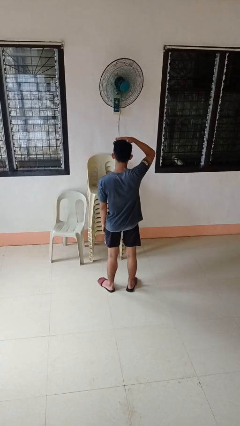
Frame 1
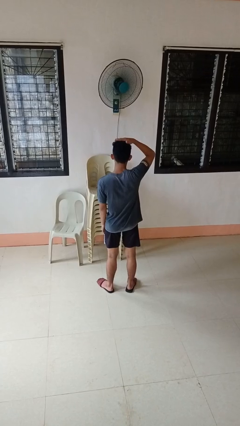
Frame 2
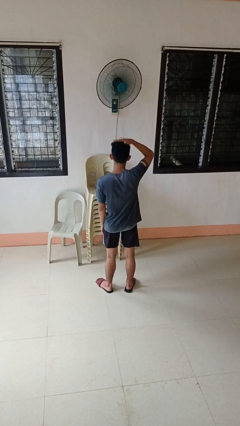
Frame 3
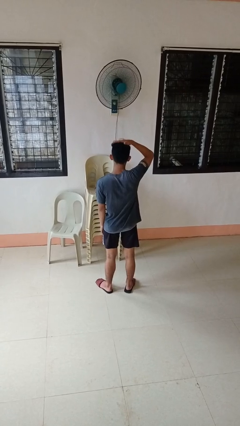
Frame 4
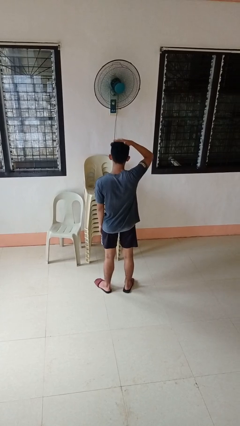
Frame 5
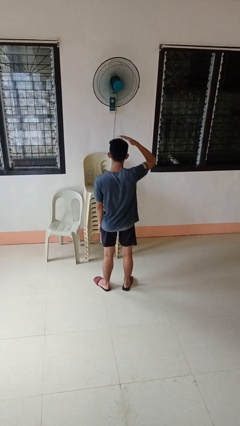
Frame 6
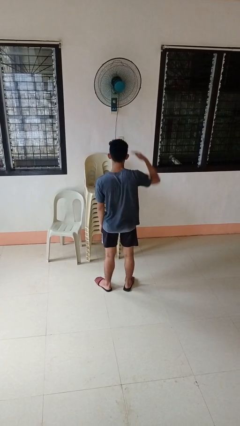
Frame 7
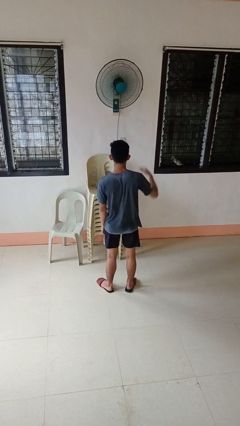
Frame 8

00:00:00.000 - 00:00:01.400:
person pats head

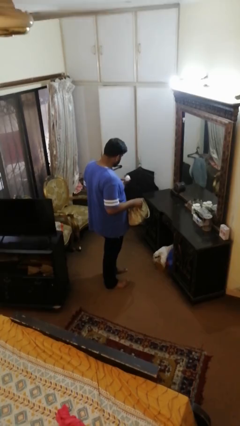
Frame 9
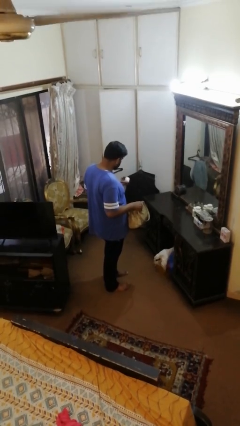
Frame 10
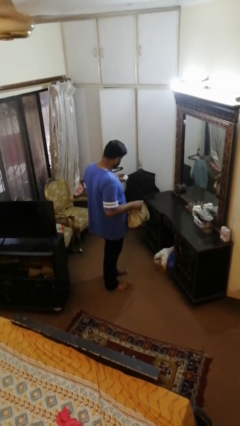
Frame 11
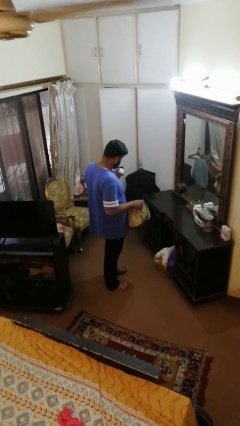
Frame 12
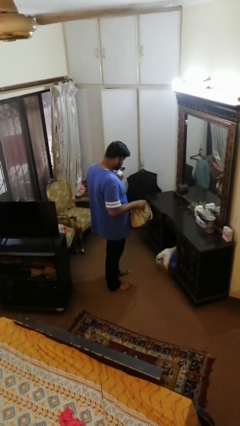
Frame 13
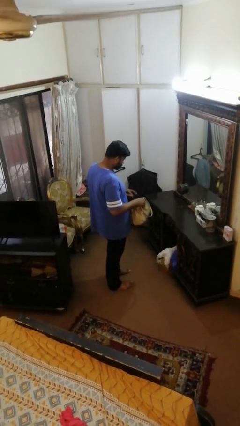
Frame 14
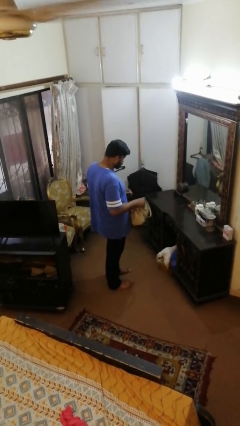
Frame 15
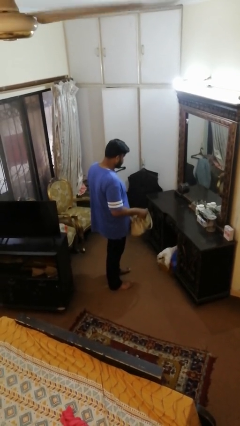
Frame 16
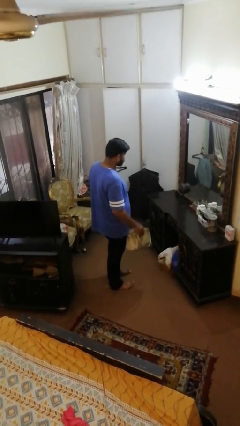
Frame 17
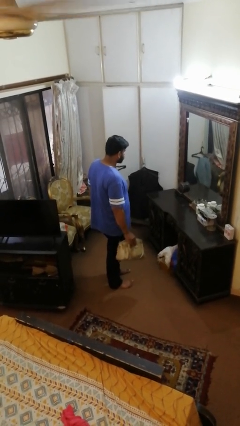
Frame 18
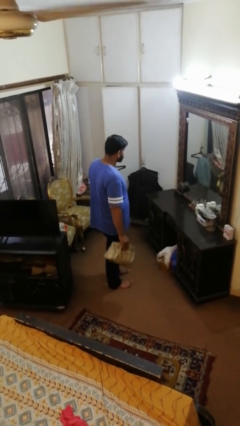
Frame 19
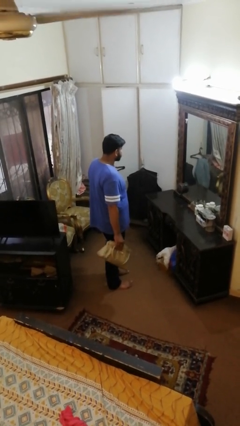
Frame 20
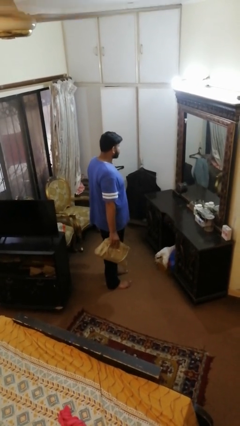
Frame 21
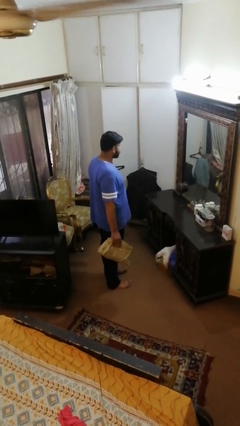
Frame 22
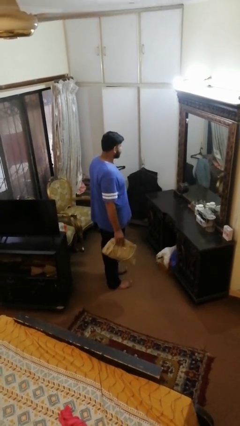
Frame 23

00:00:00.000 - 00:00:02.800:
person puts object into purse

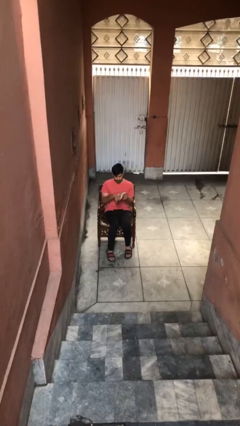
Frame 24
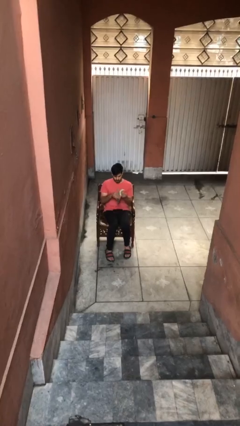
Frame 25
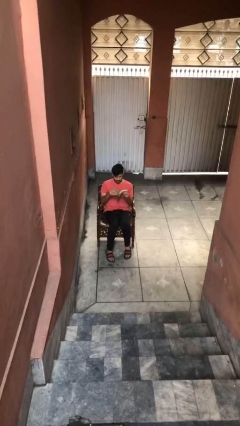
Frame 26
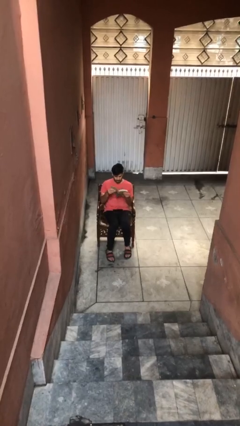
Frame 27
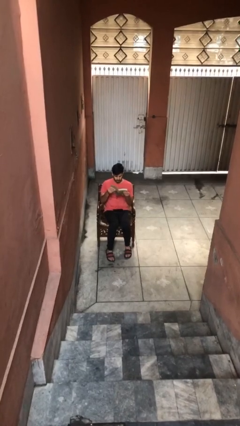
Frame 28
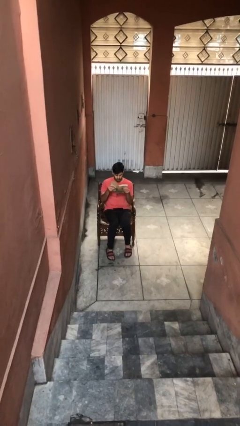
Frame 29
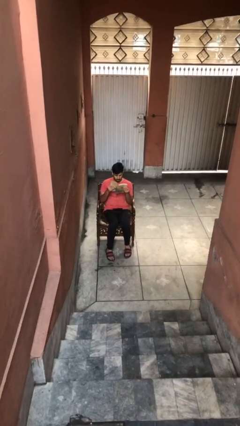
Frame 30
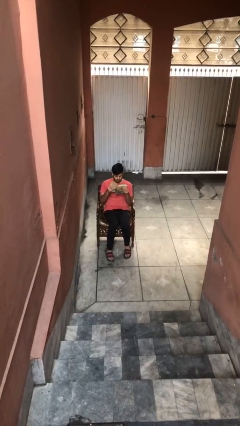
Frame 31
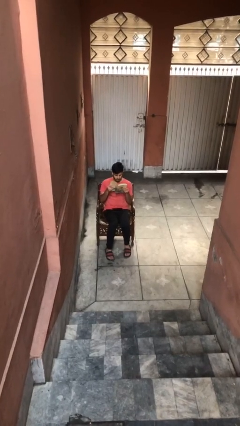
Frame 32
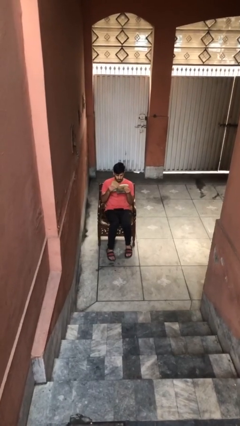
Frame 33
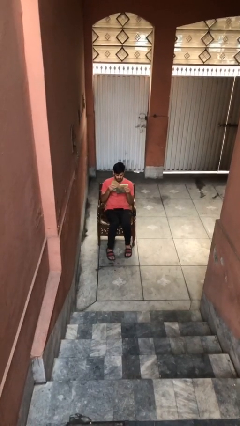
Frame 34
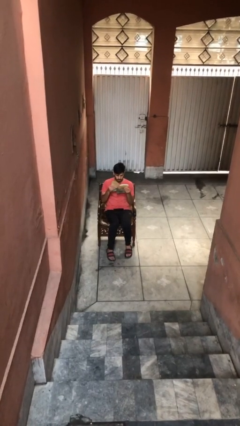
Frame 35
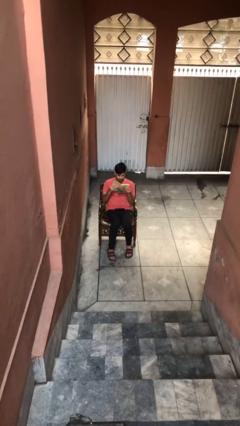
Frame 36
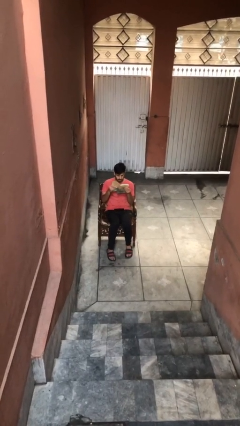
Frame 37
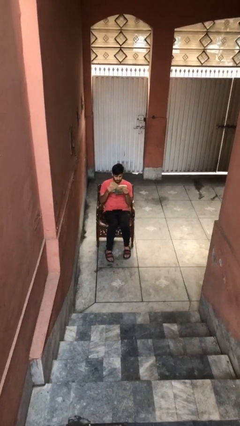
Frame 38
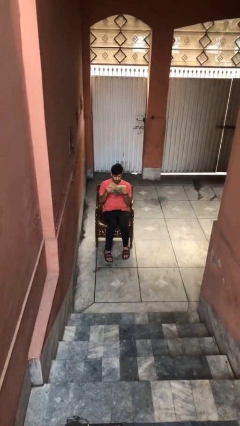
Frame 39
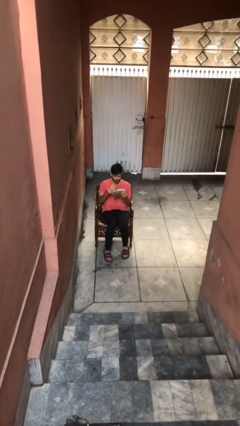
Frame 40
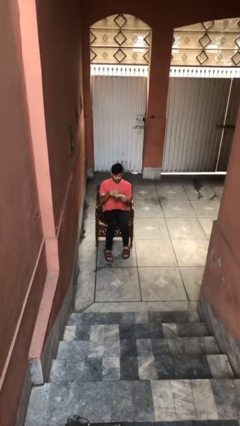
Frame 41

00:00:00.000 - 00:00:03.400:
person reads document

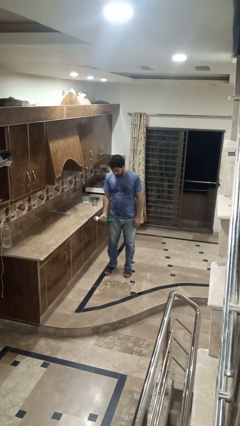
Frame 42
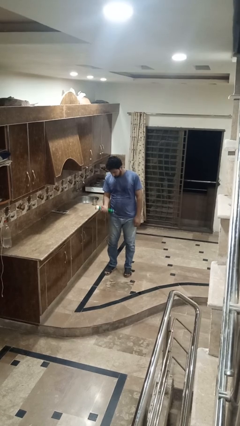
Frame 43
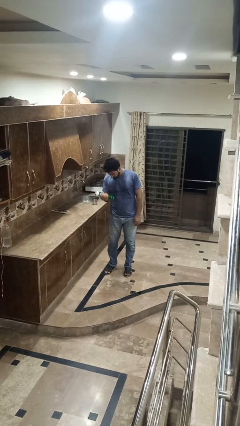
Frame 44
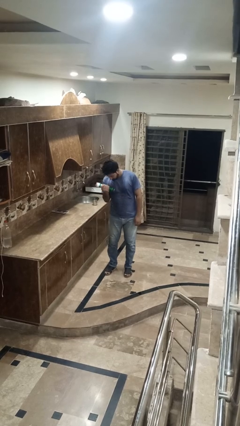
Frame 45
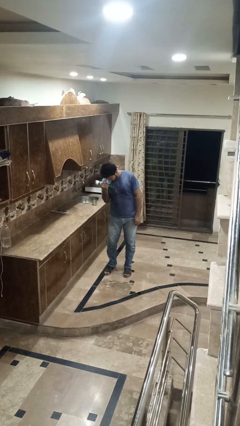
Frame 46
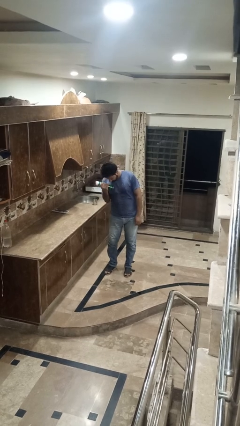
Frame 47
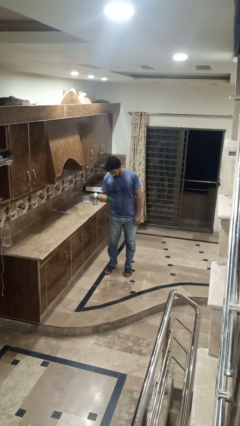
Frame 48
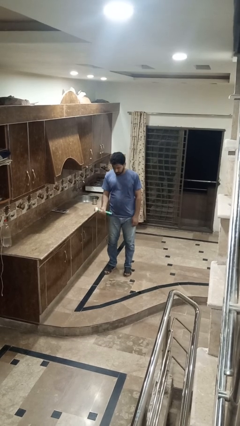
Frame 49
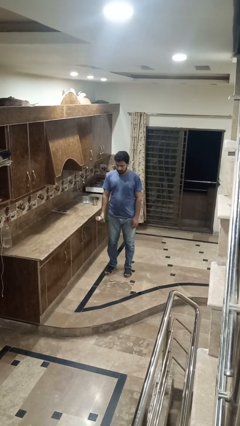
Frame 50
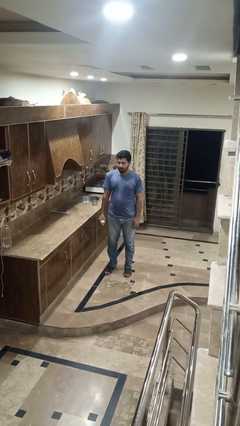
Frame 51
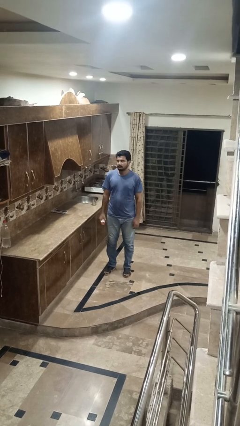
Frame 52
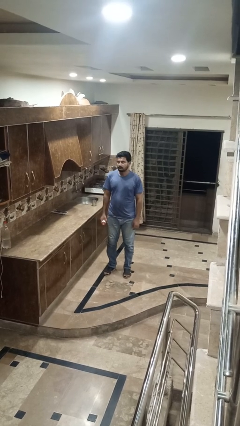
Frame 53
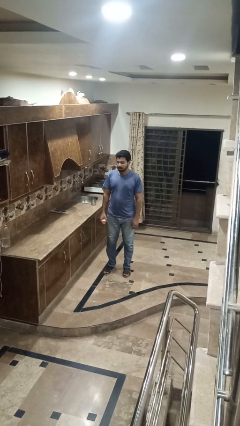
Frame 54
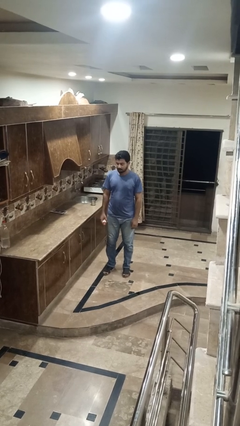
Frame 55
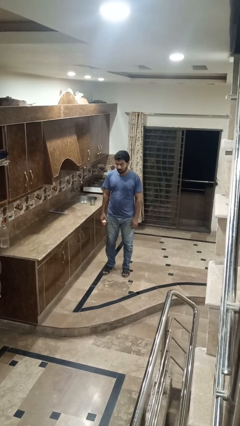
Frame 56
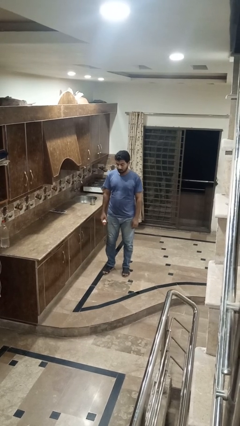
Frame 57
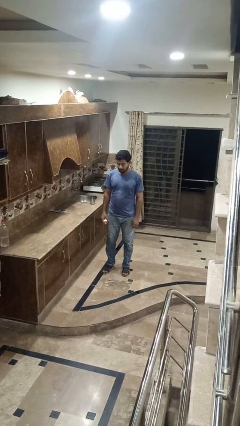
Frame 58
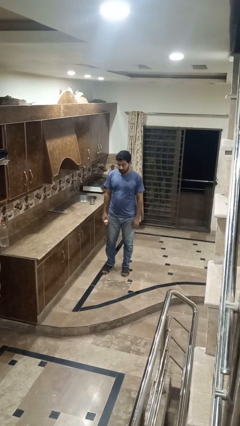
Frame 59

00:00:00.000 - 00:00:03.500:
person lifts dumbbells

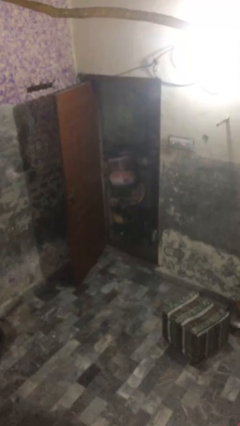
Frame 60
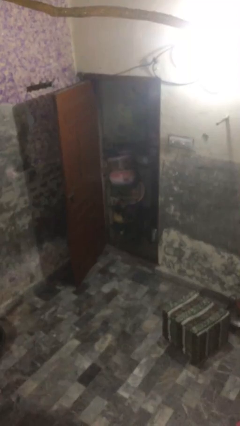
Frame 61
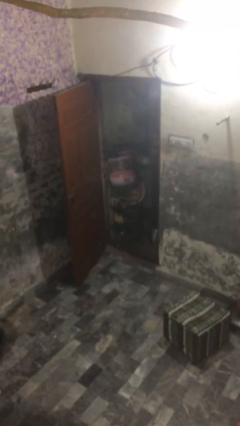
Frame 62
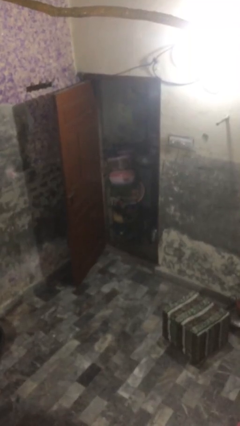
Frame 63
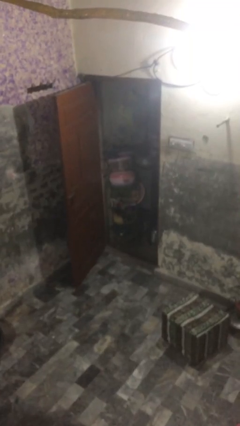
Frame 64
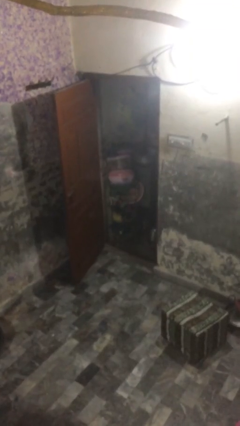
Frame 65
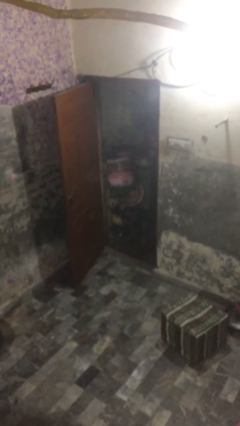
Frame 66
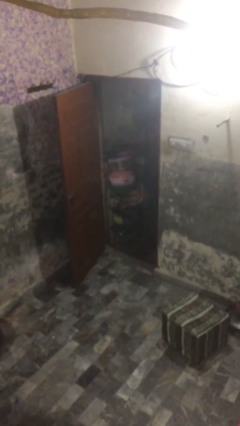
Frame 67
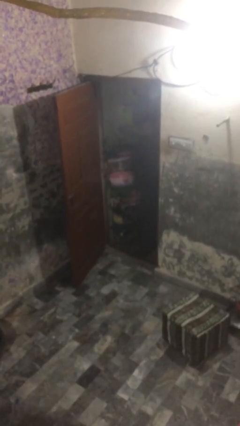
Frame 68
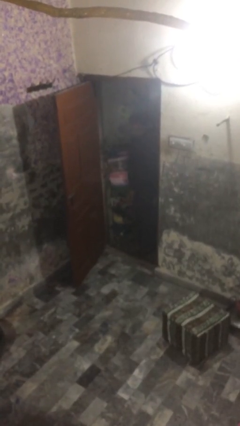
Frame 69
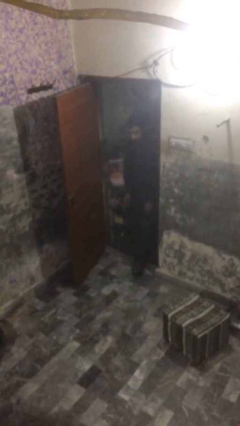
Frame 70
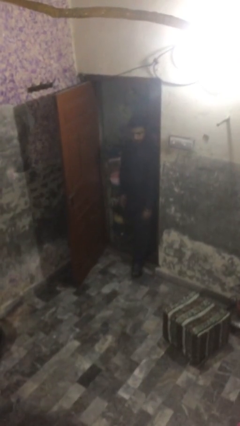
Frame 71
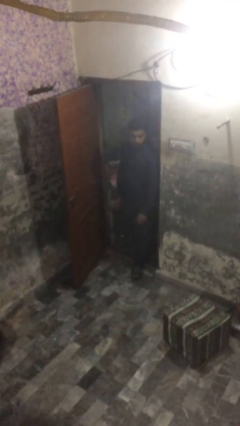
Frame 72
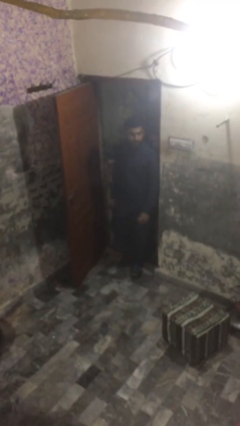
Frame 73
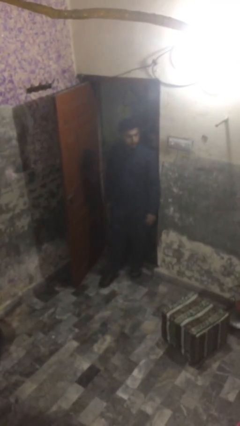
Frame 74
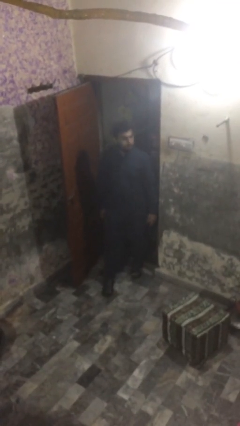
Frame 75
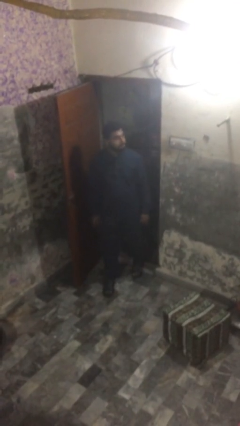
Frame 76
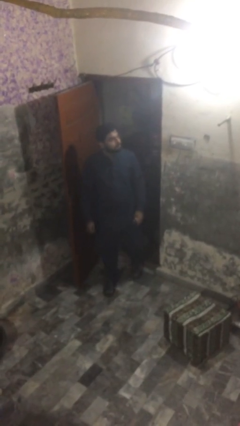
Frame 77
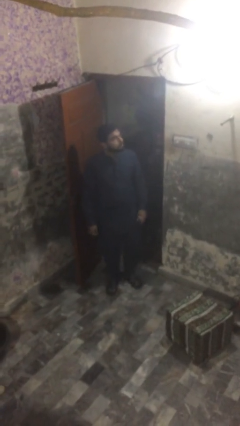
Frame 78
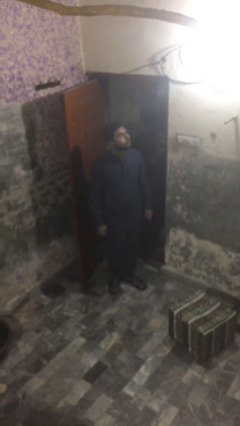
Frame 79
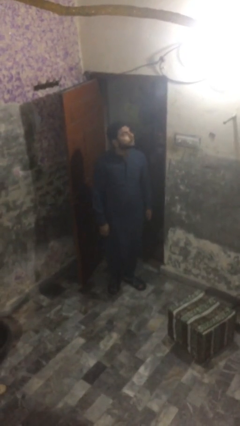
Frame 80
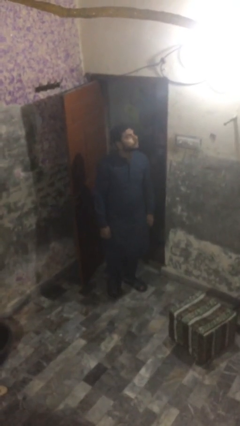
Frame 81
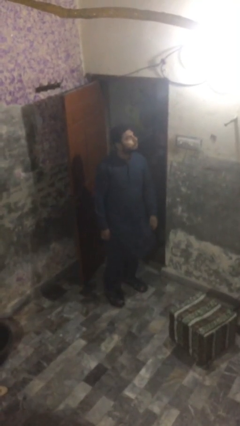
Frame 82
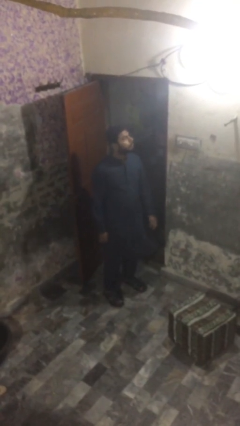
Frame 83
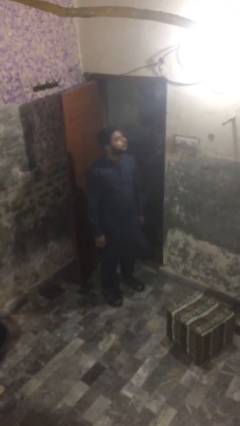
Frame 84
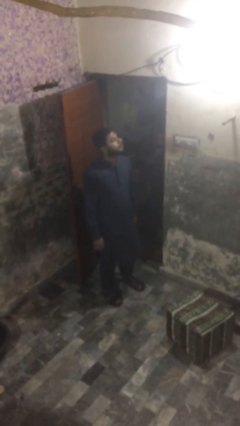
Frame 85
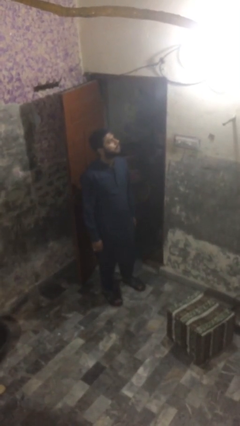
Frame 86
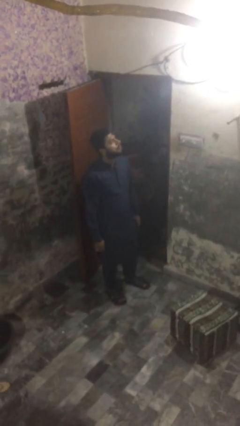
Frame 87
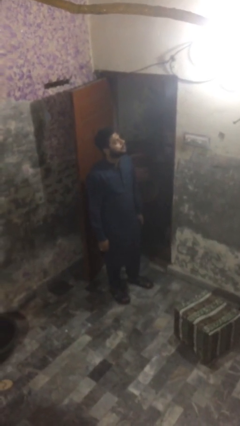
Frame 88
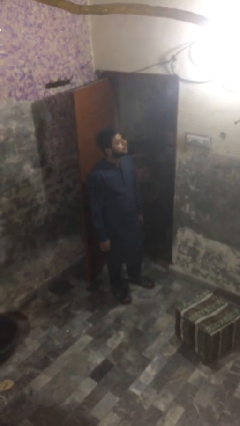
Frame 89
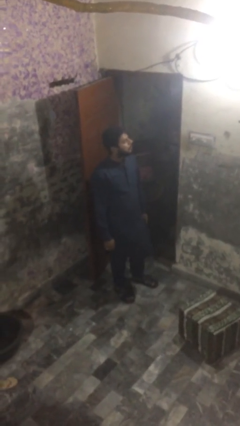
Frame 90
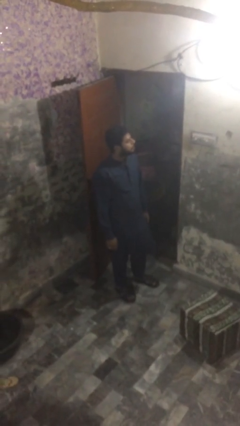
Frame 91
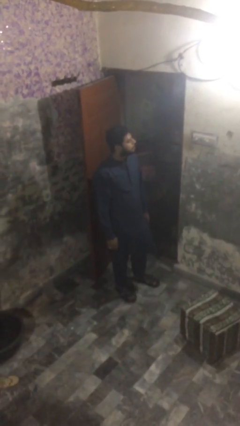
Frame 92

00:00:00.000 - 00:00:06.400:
person enters scene through structure

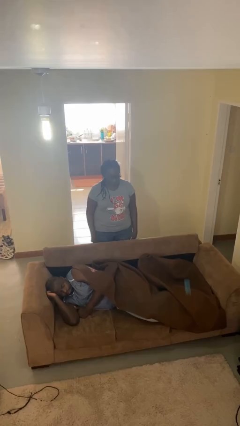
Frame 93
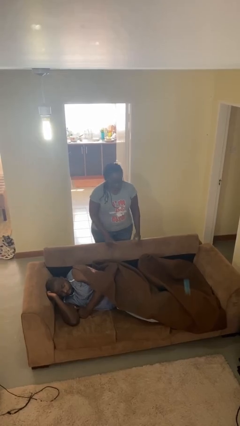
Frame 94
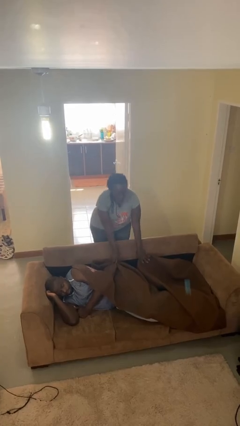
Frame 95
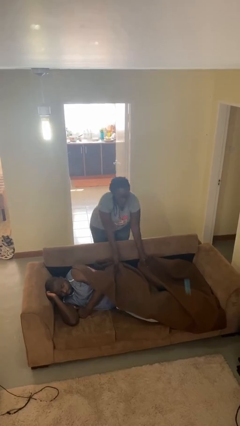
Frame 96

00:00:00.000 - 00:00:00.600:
person uncovers friend with blanket
